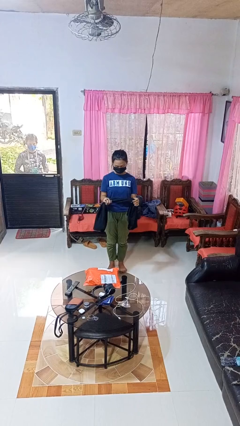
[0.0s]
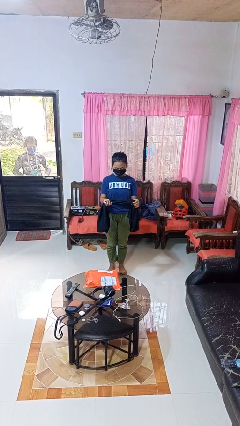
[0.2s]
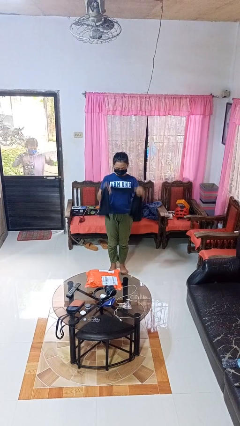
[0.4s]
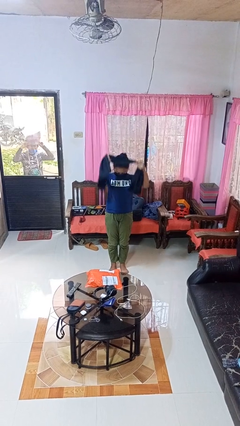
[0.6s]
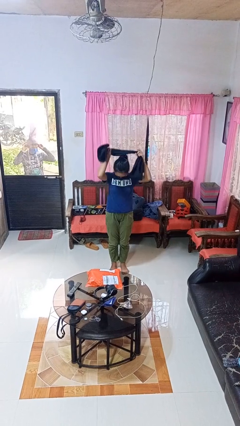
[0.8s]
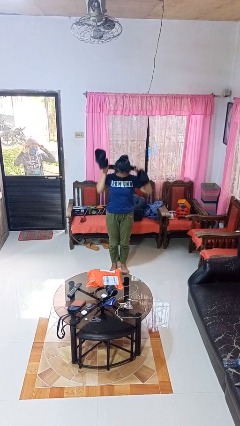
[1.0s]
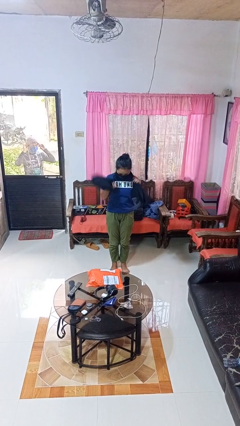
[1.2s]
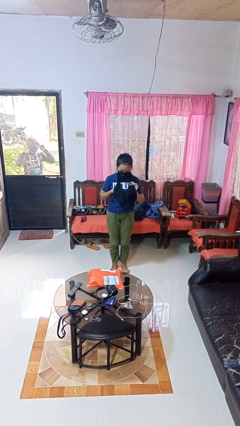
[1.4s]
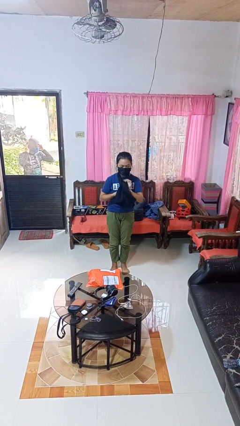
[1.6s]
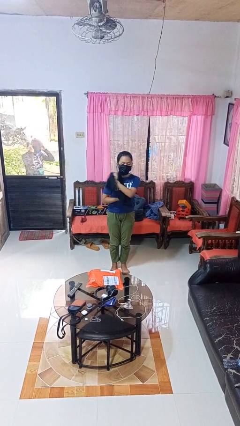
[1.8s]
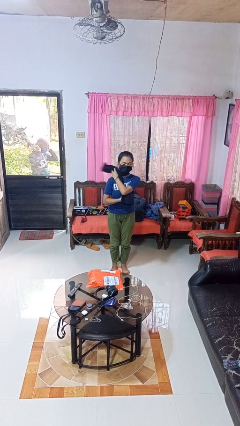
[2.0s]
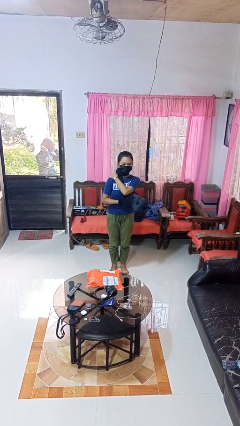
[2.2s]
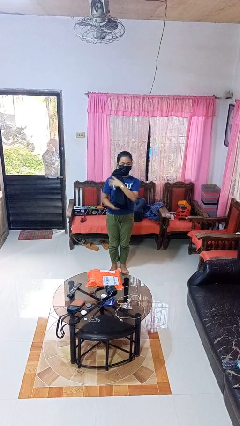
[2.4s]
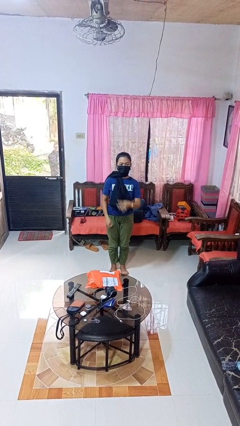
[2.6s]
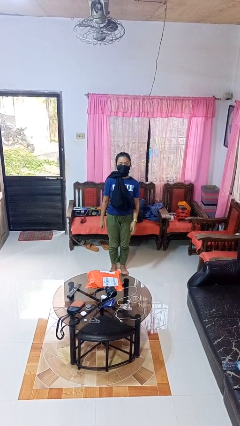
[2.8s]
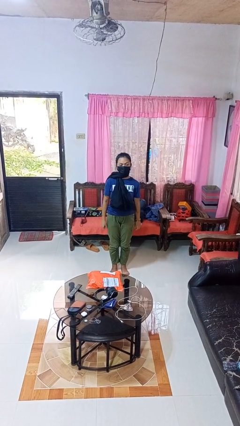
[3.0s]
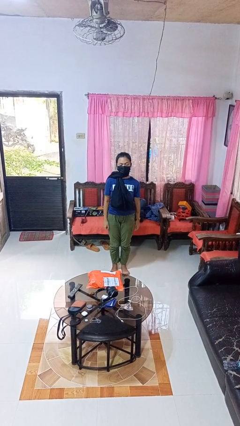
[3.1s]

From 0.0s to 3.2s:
person puts on scarf

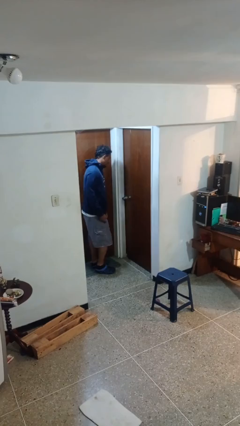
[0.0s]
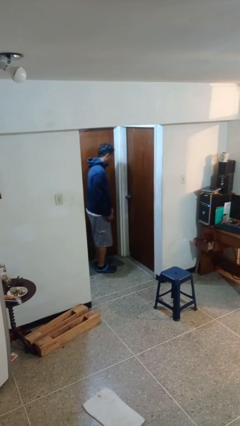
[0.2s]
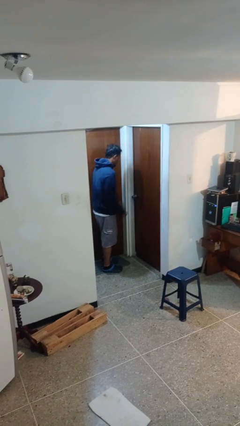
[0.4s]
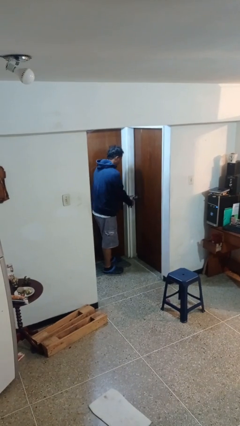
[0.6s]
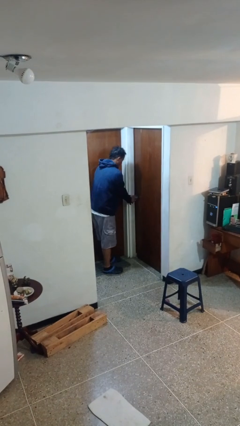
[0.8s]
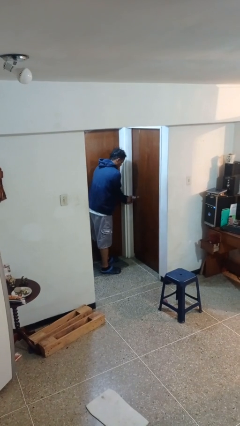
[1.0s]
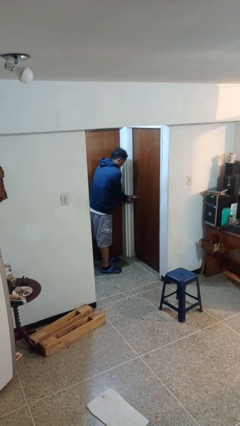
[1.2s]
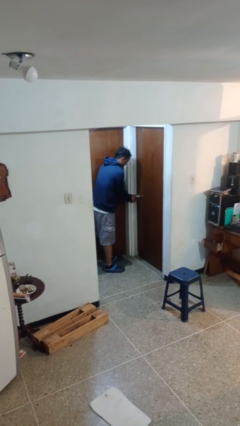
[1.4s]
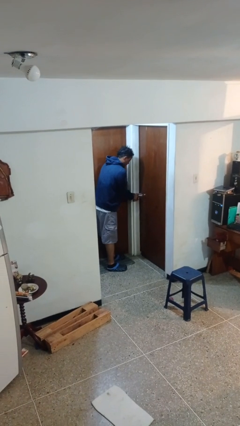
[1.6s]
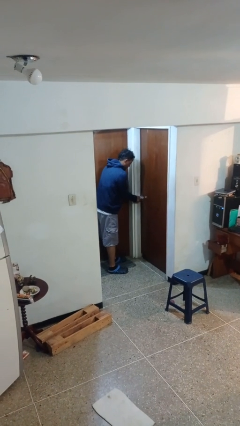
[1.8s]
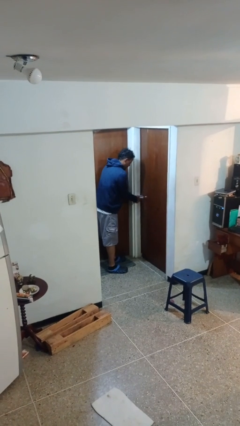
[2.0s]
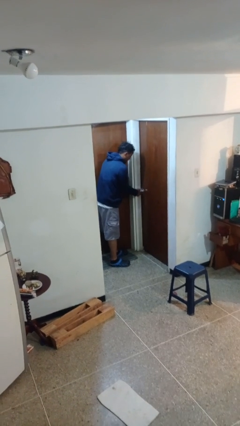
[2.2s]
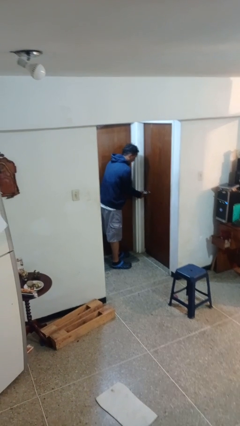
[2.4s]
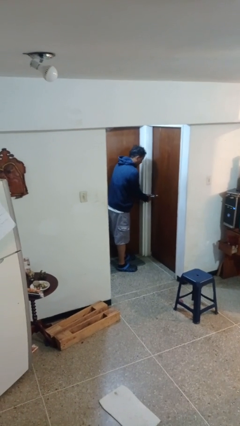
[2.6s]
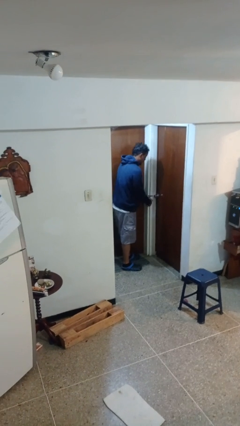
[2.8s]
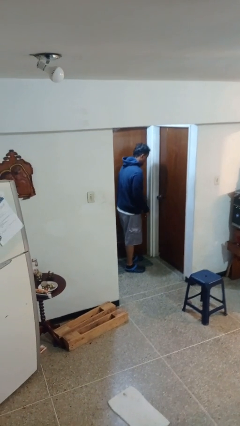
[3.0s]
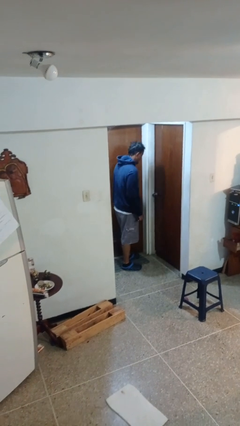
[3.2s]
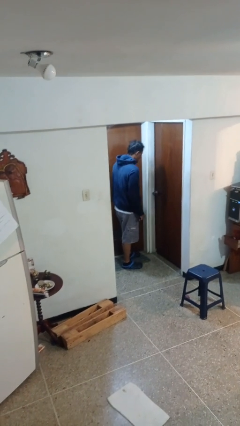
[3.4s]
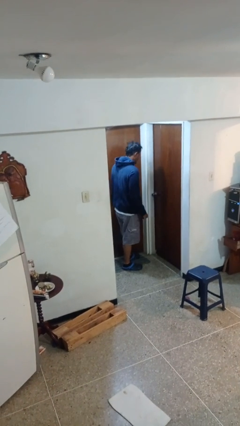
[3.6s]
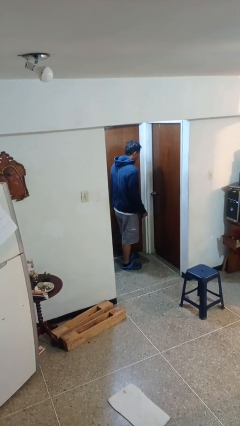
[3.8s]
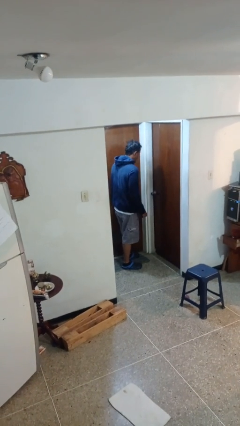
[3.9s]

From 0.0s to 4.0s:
person locks door with keys

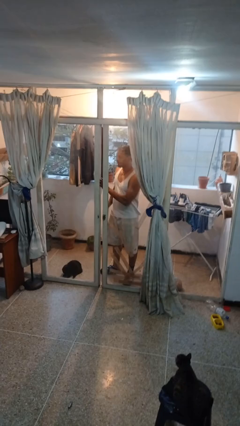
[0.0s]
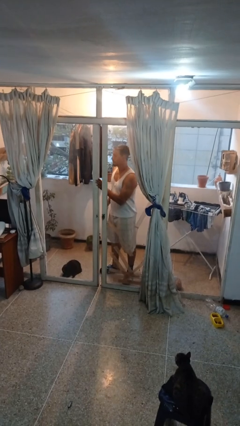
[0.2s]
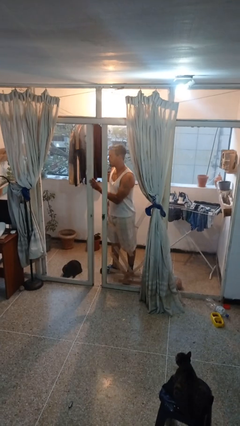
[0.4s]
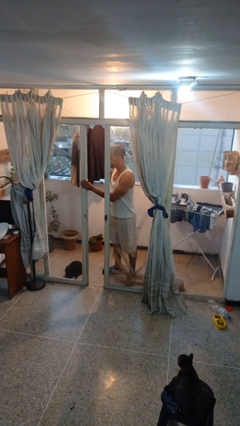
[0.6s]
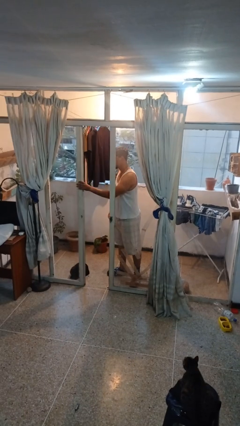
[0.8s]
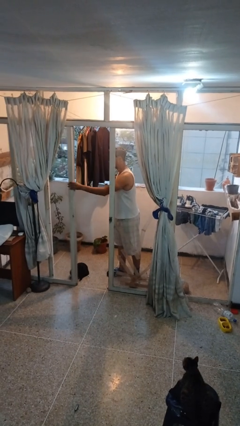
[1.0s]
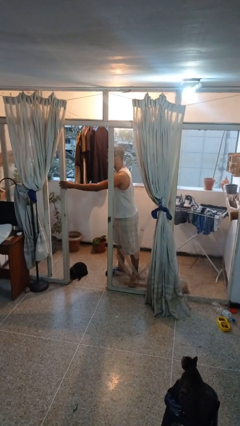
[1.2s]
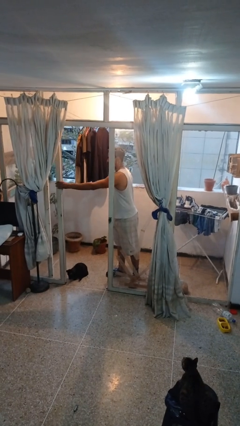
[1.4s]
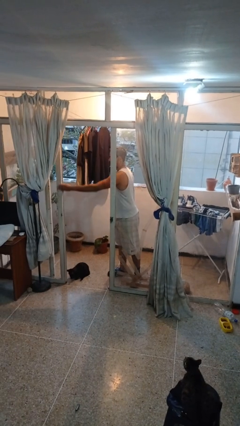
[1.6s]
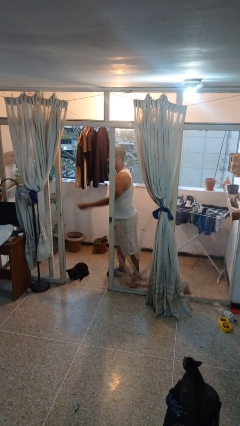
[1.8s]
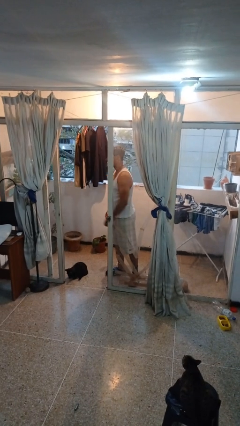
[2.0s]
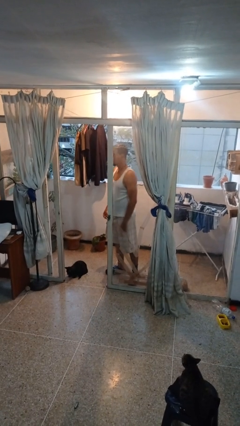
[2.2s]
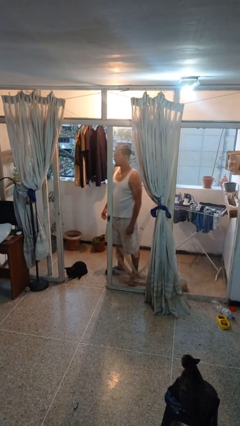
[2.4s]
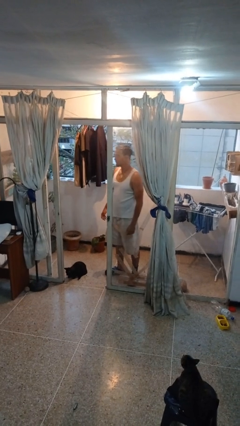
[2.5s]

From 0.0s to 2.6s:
person opens sliding door

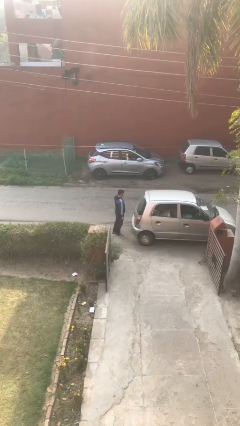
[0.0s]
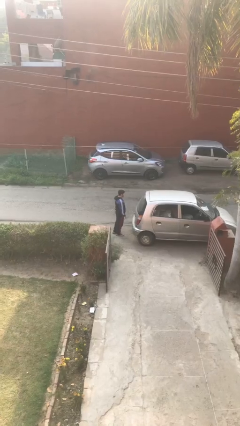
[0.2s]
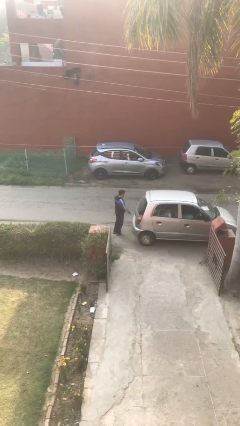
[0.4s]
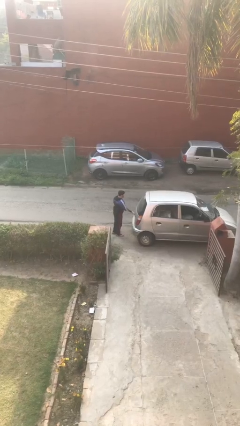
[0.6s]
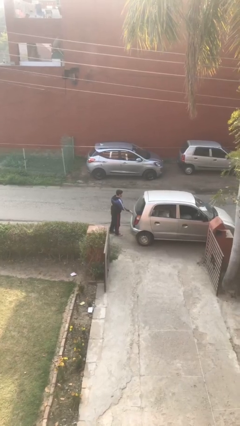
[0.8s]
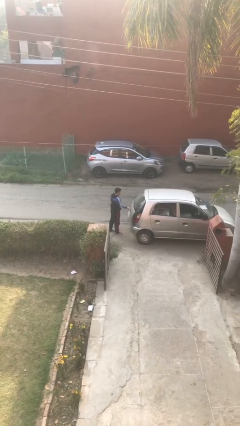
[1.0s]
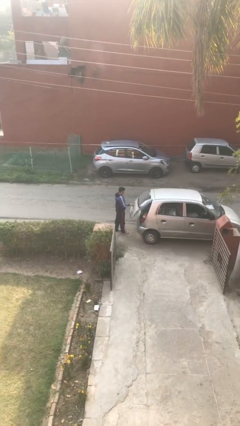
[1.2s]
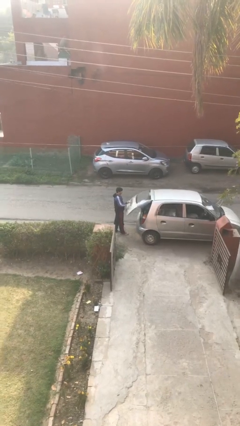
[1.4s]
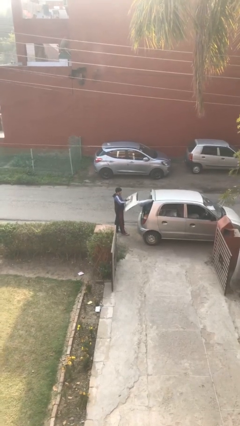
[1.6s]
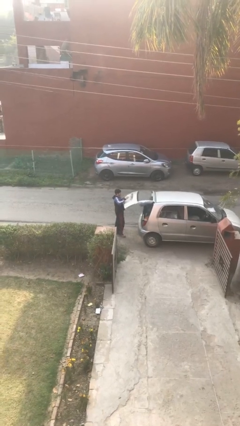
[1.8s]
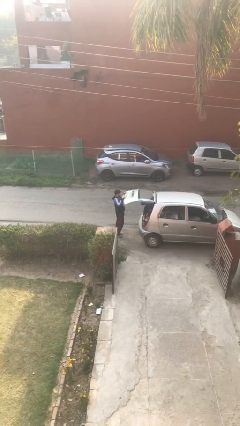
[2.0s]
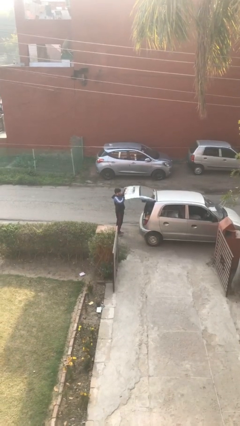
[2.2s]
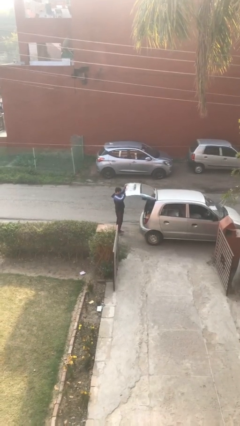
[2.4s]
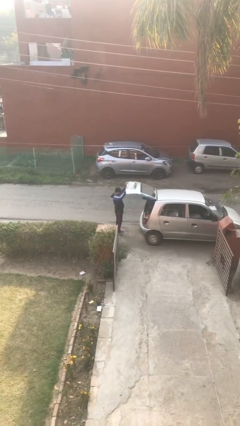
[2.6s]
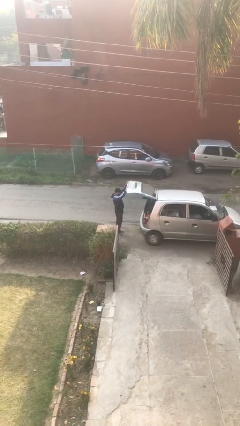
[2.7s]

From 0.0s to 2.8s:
person opens car trunk

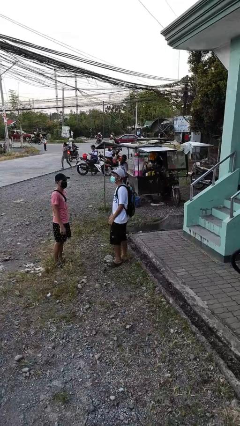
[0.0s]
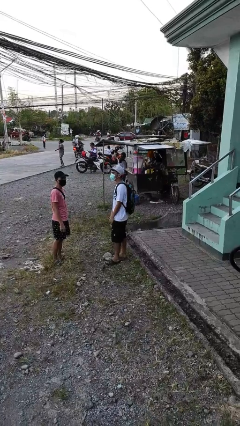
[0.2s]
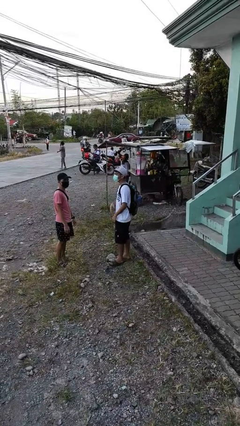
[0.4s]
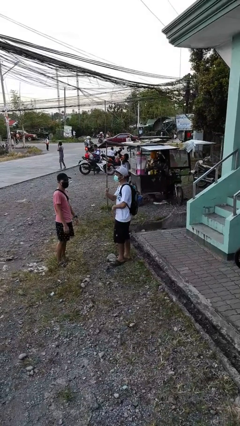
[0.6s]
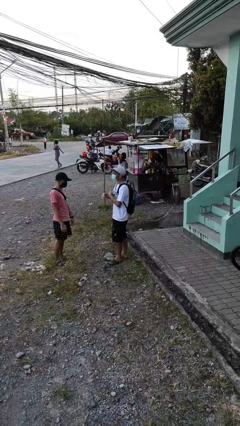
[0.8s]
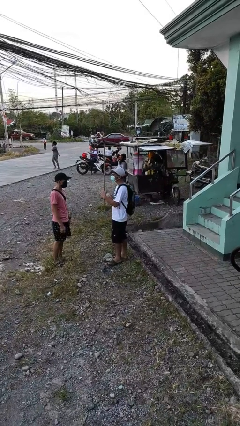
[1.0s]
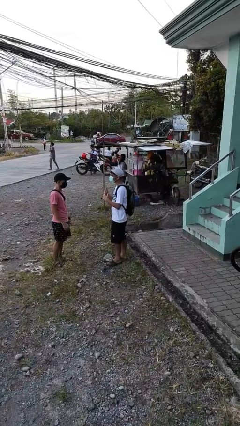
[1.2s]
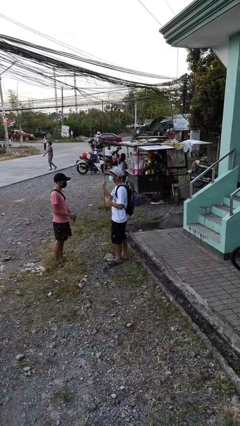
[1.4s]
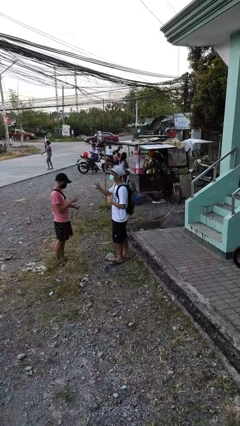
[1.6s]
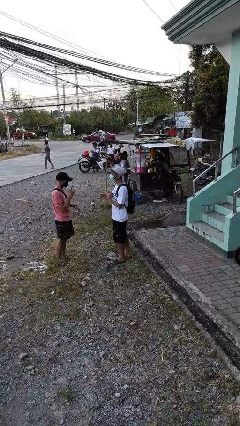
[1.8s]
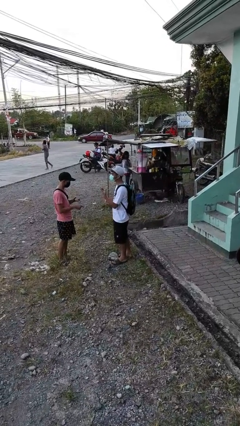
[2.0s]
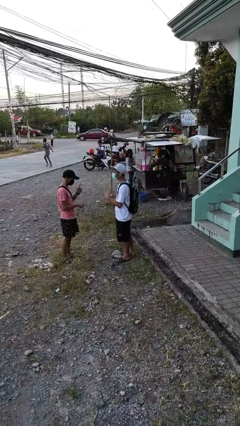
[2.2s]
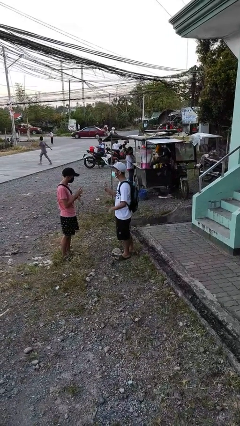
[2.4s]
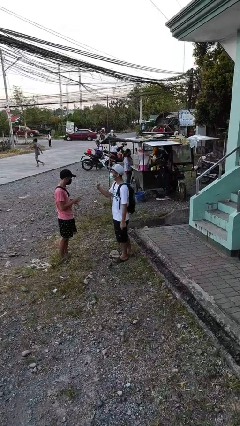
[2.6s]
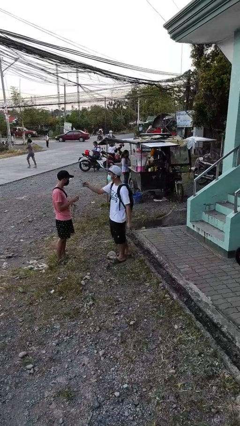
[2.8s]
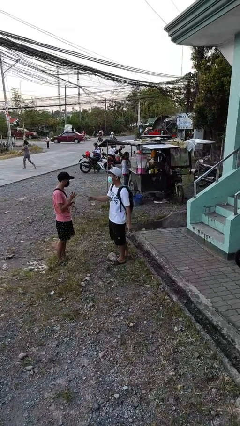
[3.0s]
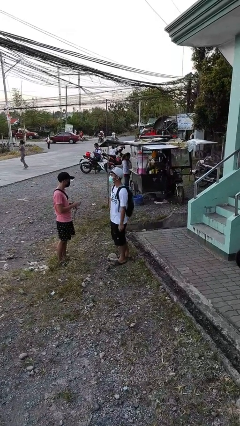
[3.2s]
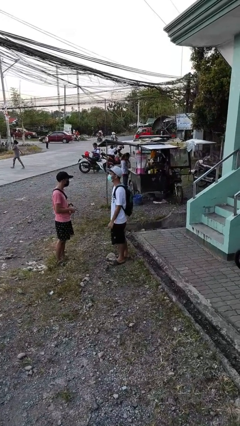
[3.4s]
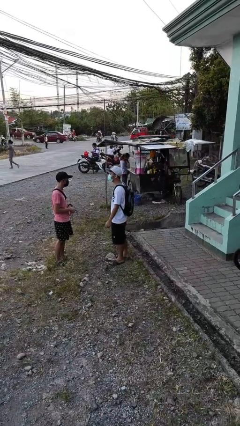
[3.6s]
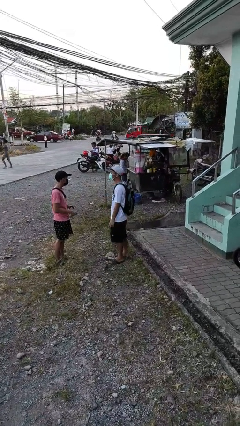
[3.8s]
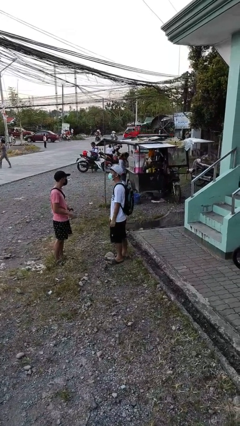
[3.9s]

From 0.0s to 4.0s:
person talks to person

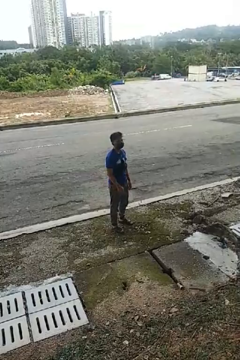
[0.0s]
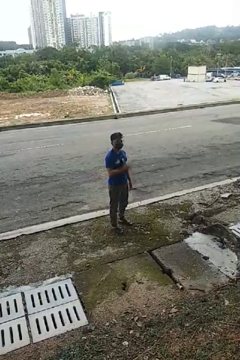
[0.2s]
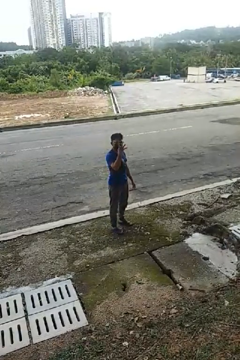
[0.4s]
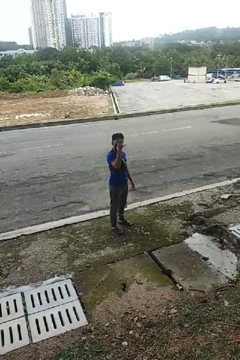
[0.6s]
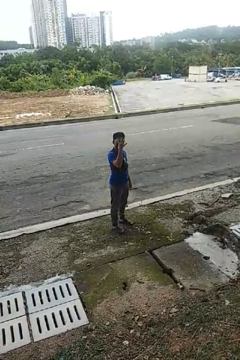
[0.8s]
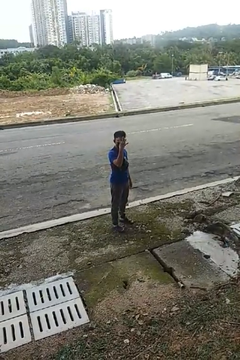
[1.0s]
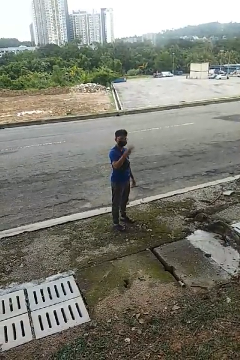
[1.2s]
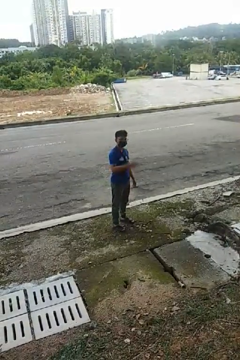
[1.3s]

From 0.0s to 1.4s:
person gestures number four
